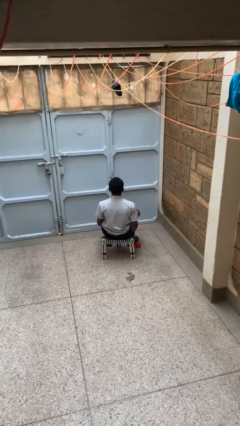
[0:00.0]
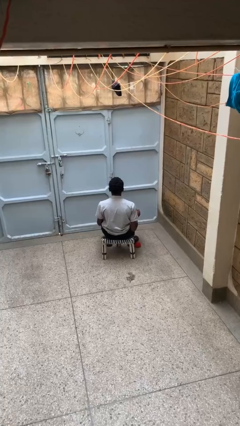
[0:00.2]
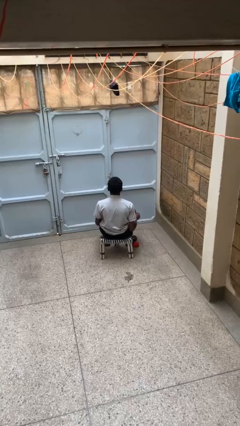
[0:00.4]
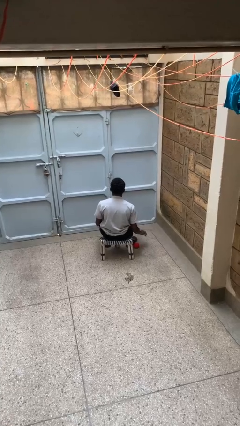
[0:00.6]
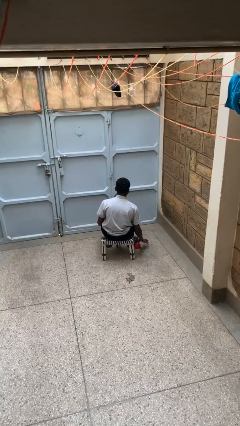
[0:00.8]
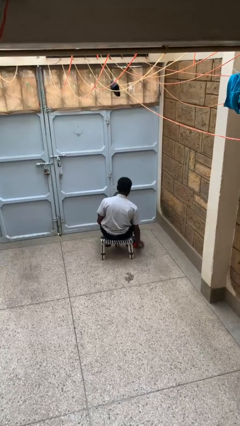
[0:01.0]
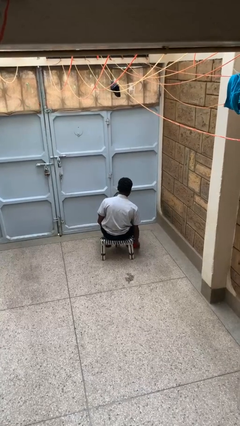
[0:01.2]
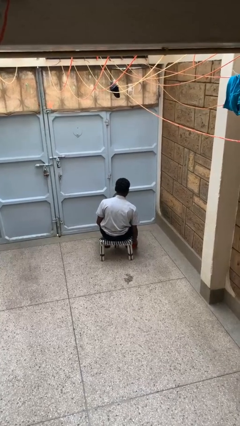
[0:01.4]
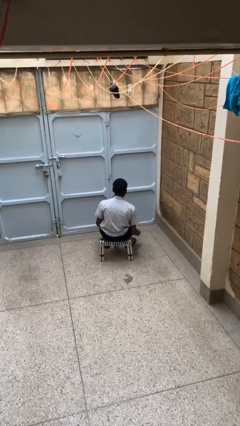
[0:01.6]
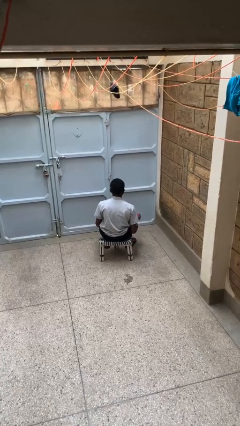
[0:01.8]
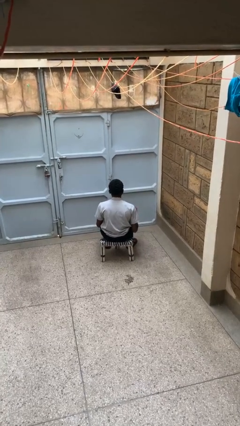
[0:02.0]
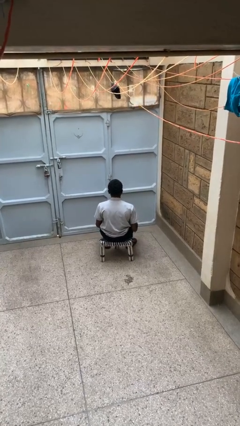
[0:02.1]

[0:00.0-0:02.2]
person picks up object from floor

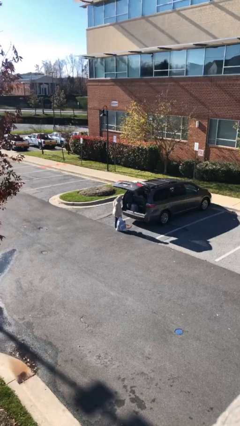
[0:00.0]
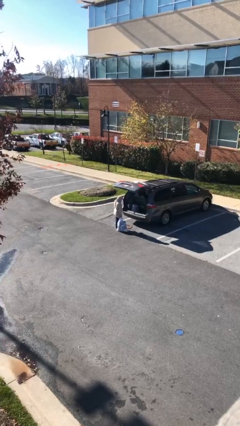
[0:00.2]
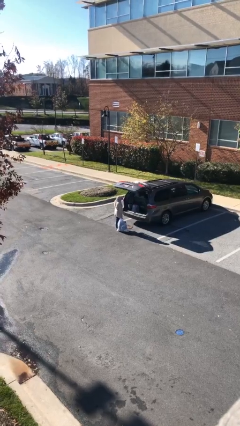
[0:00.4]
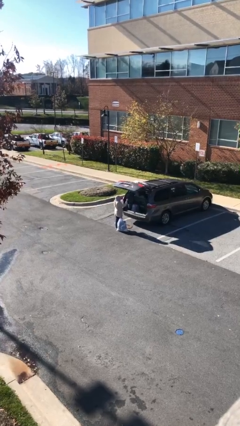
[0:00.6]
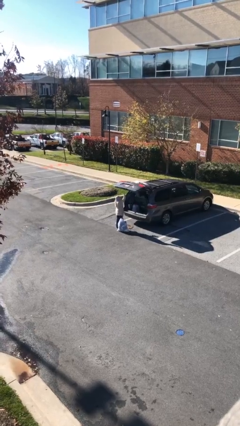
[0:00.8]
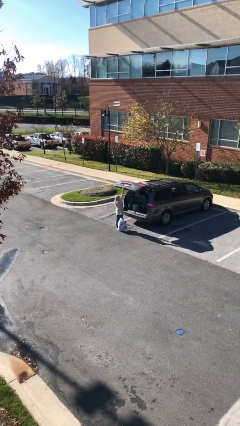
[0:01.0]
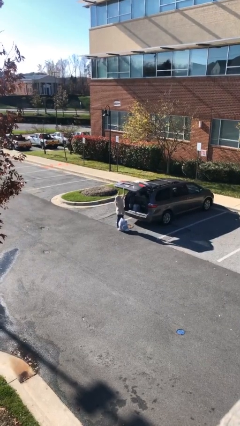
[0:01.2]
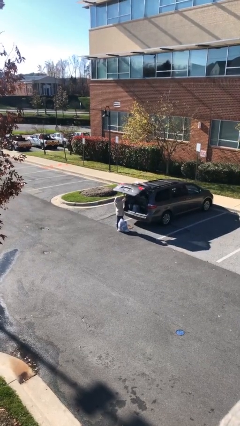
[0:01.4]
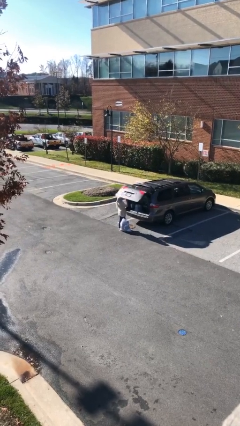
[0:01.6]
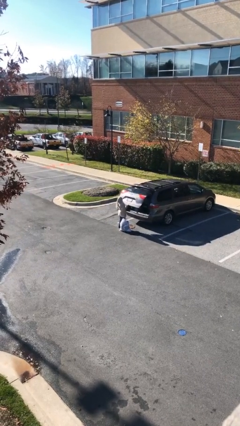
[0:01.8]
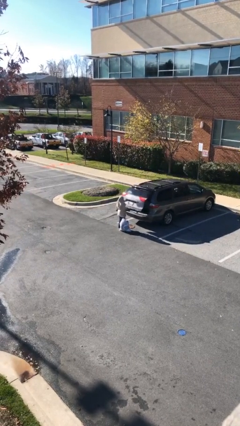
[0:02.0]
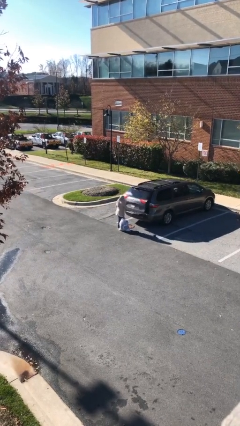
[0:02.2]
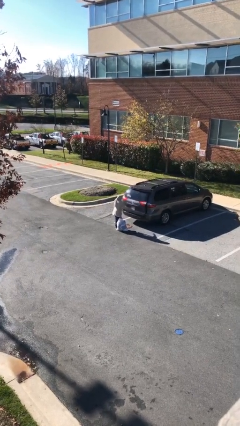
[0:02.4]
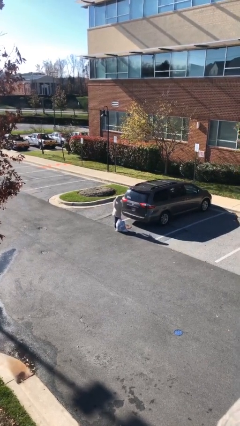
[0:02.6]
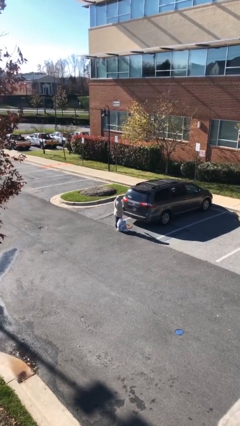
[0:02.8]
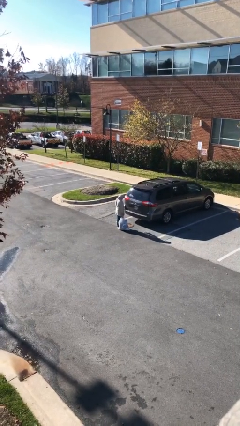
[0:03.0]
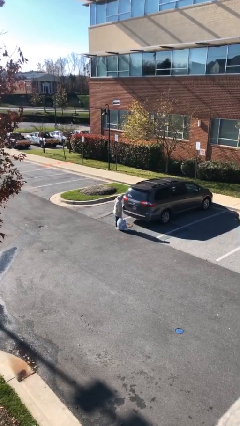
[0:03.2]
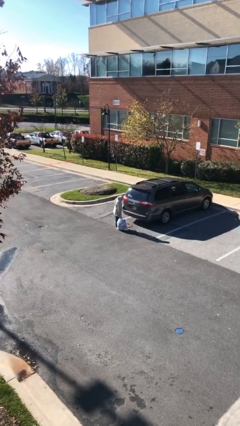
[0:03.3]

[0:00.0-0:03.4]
person closes car trunk

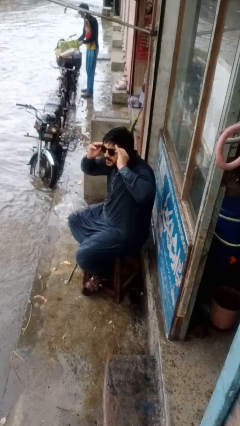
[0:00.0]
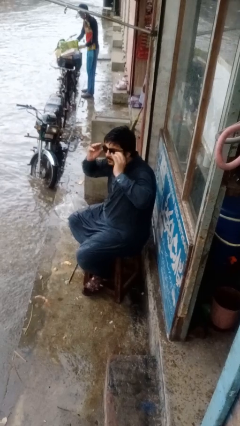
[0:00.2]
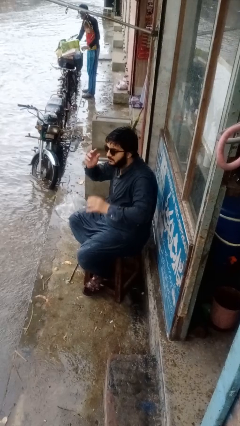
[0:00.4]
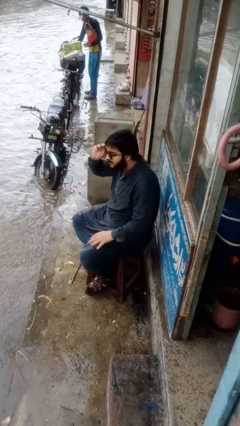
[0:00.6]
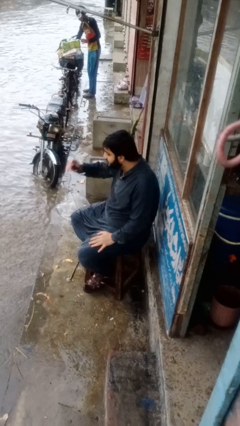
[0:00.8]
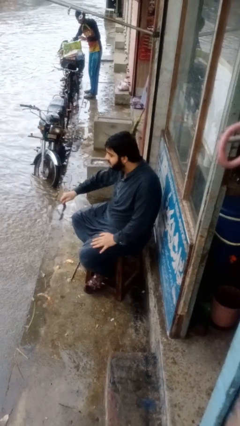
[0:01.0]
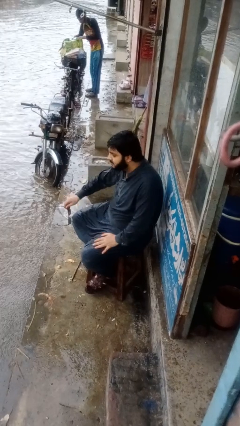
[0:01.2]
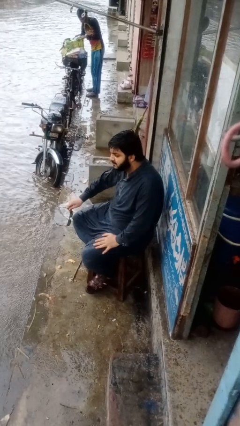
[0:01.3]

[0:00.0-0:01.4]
person takes off glasses

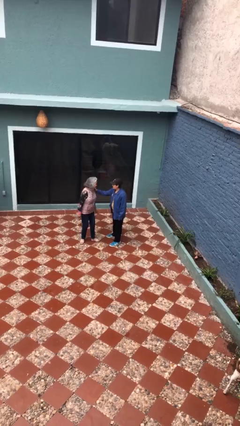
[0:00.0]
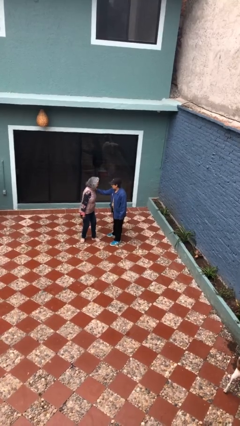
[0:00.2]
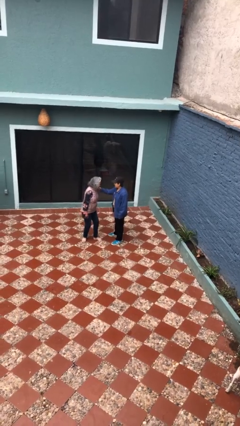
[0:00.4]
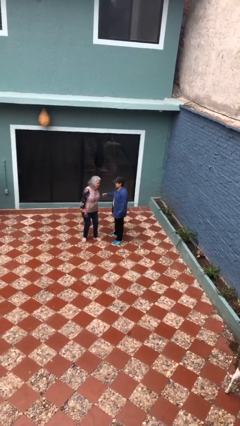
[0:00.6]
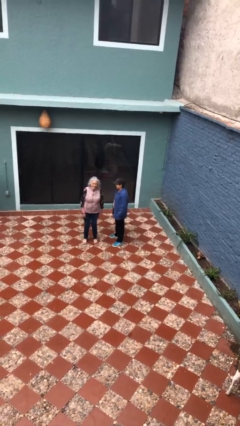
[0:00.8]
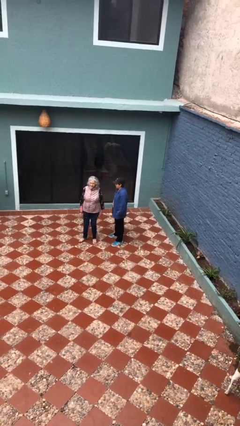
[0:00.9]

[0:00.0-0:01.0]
person spins person around

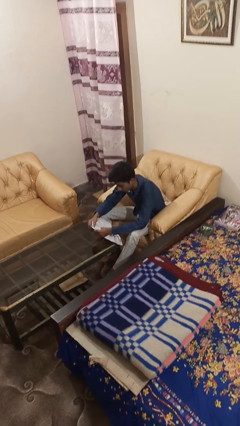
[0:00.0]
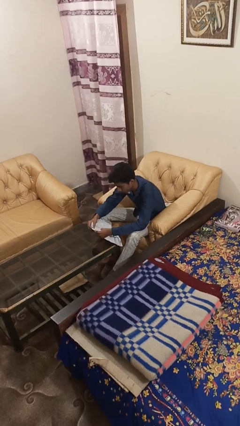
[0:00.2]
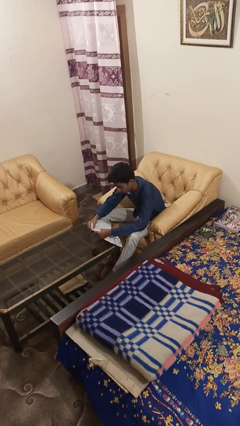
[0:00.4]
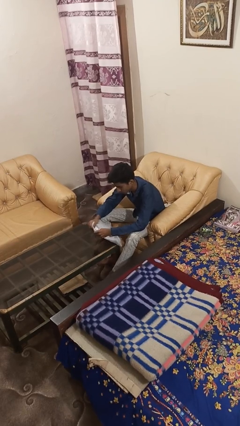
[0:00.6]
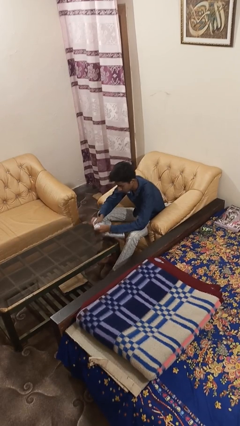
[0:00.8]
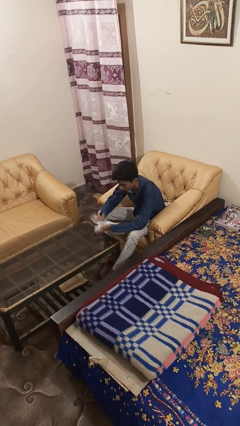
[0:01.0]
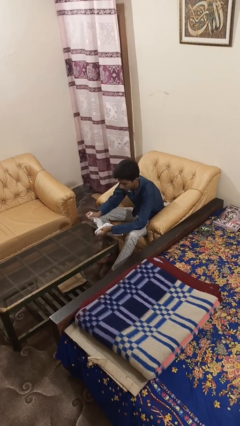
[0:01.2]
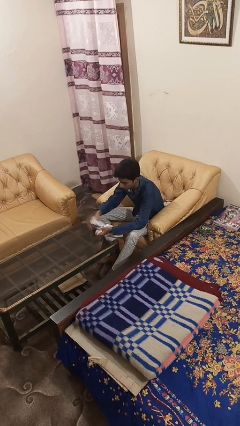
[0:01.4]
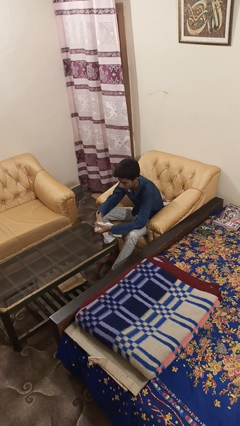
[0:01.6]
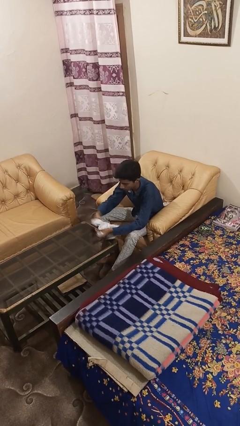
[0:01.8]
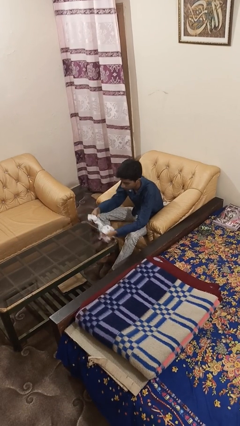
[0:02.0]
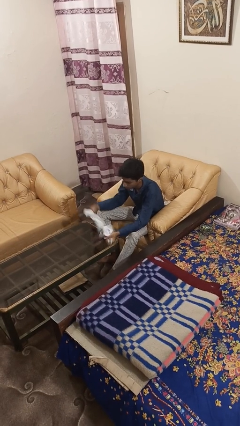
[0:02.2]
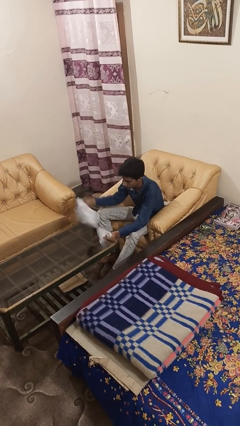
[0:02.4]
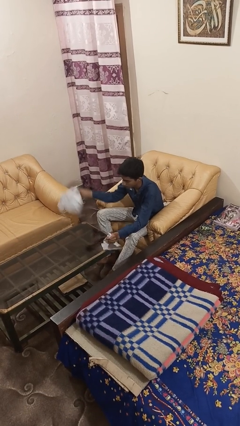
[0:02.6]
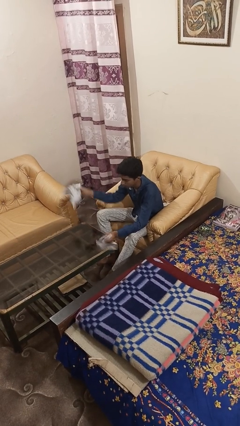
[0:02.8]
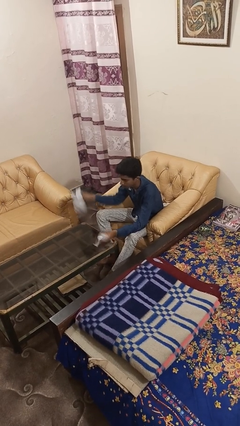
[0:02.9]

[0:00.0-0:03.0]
person tears paper

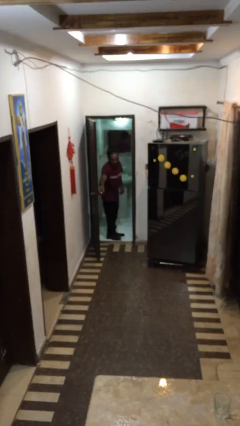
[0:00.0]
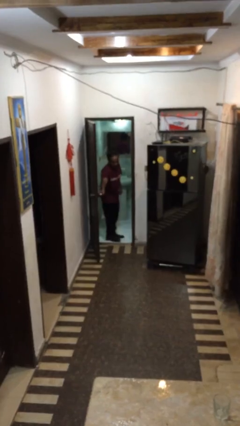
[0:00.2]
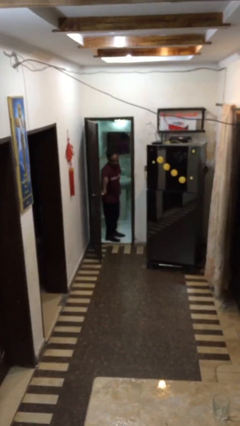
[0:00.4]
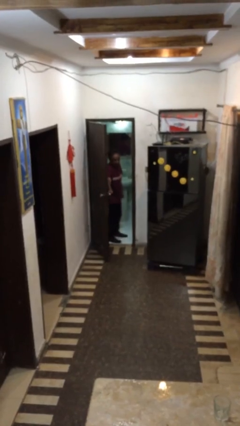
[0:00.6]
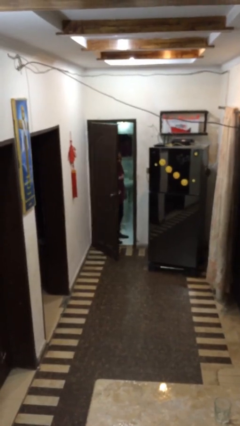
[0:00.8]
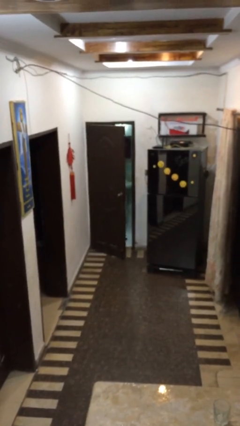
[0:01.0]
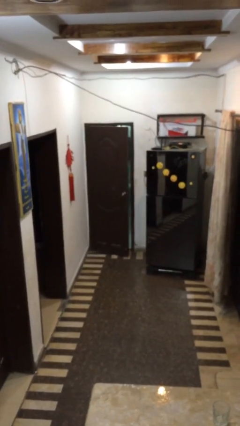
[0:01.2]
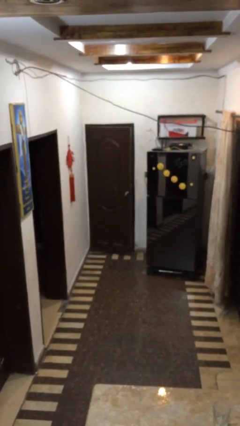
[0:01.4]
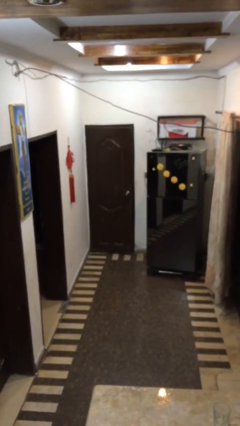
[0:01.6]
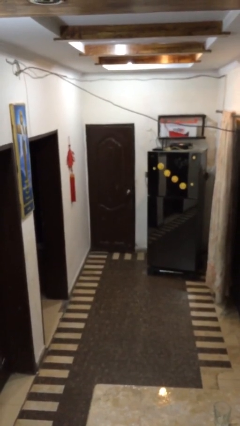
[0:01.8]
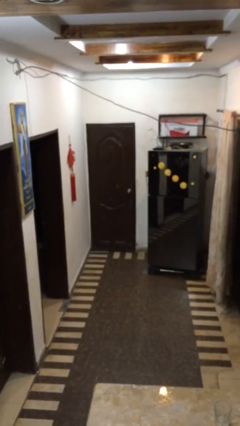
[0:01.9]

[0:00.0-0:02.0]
person closes facility door

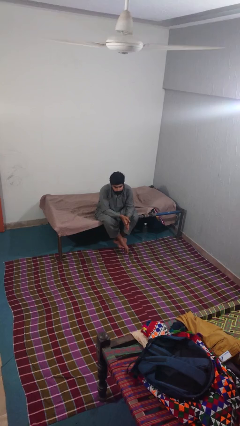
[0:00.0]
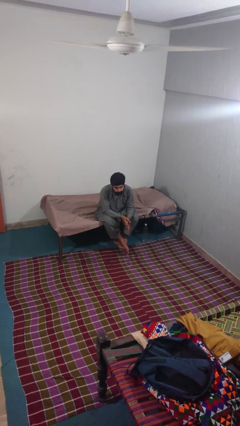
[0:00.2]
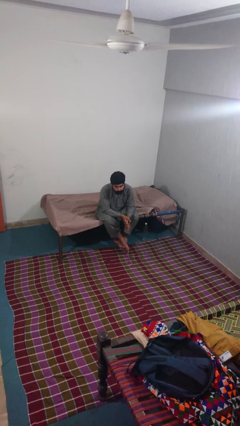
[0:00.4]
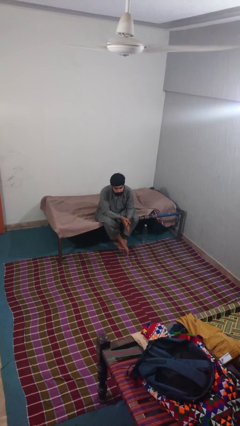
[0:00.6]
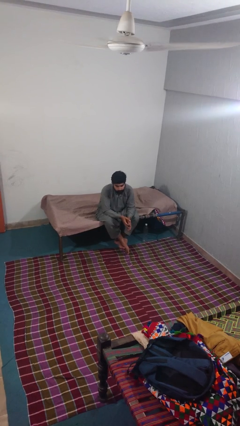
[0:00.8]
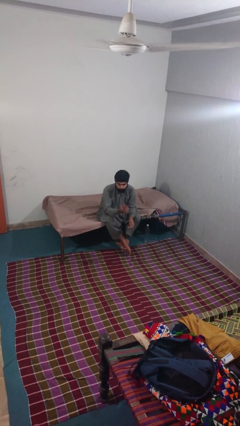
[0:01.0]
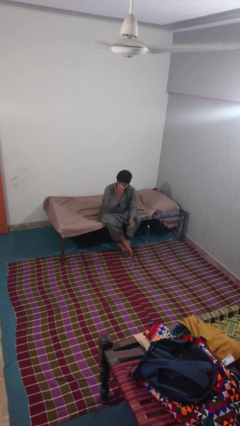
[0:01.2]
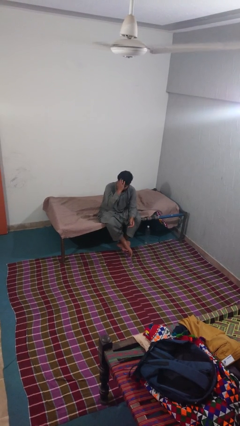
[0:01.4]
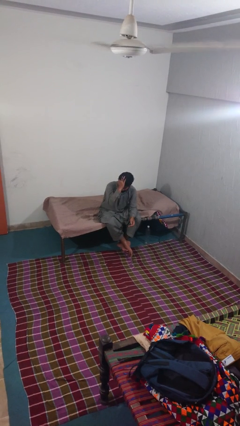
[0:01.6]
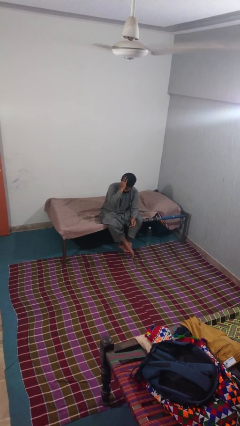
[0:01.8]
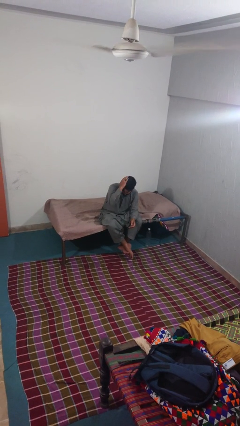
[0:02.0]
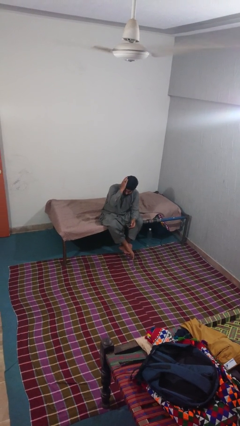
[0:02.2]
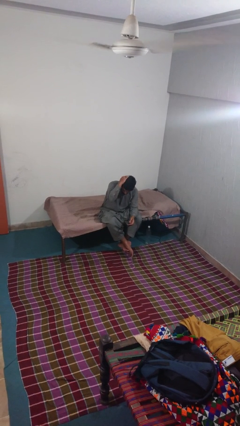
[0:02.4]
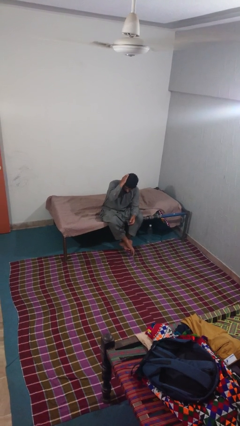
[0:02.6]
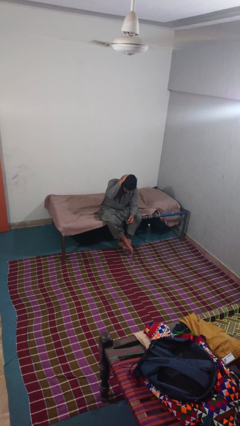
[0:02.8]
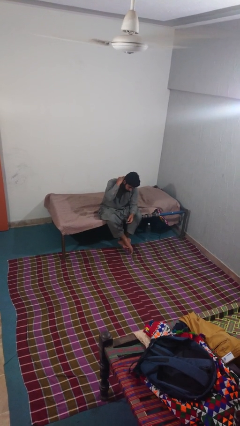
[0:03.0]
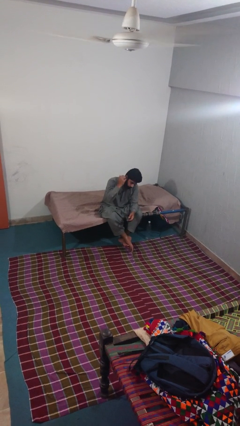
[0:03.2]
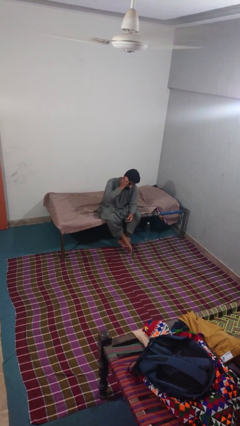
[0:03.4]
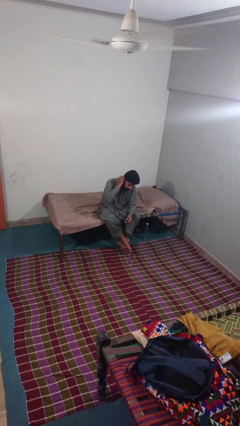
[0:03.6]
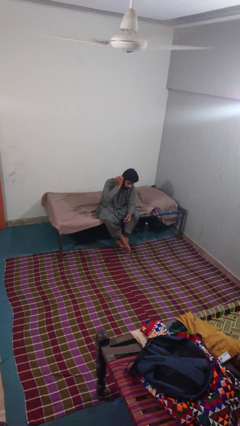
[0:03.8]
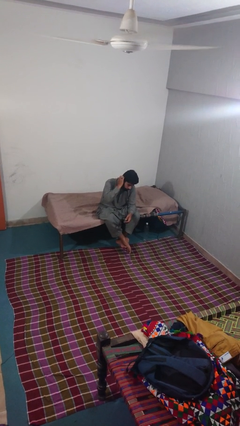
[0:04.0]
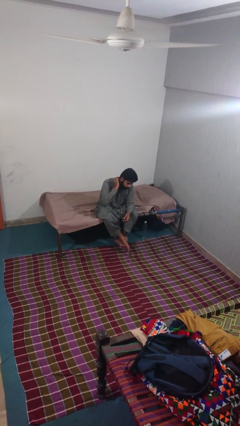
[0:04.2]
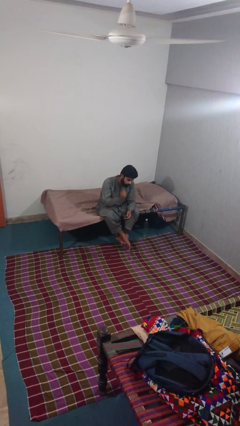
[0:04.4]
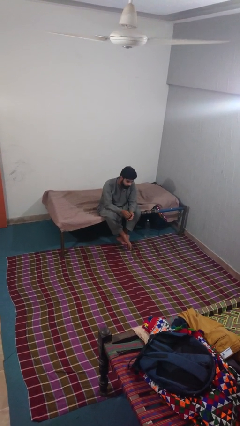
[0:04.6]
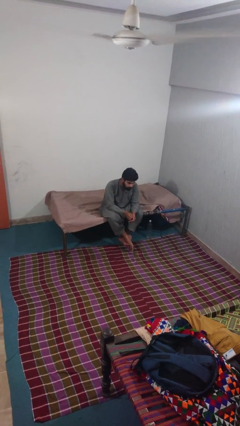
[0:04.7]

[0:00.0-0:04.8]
person strokes hair
